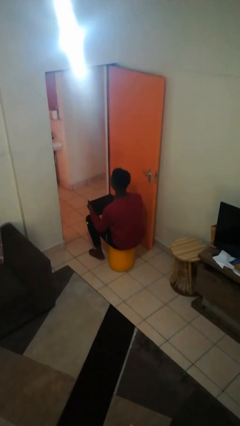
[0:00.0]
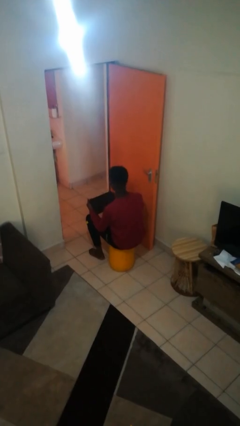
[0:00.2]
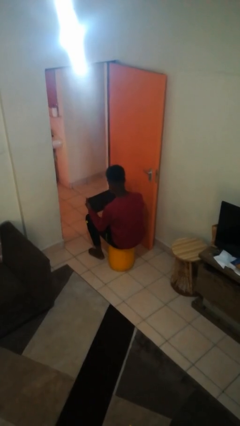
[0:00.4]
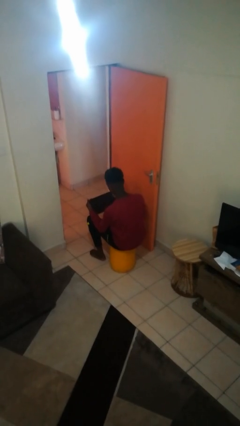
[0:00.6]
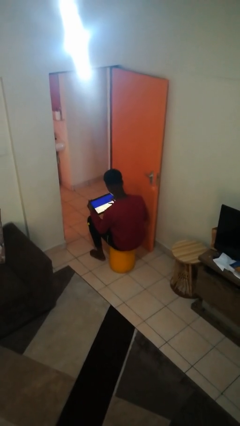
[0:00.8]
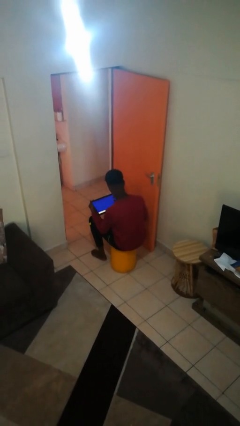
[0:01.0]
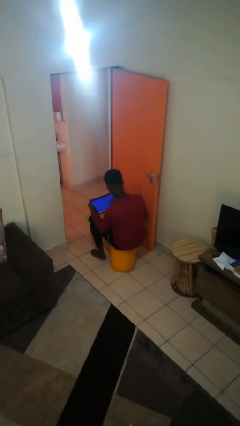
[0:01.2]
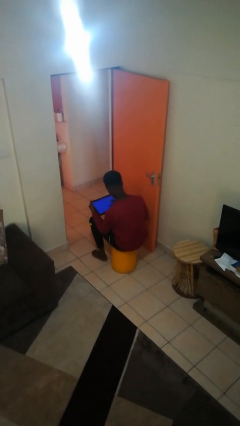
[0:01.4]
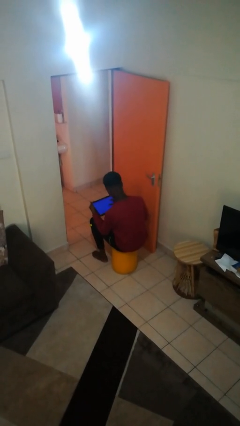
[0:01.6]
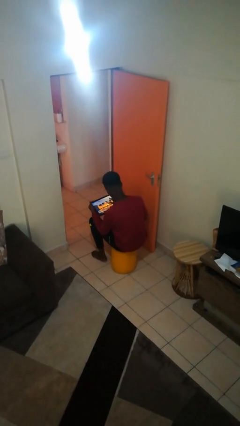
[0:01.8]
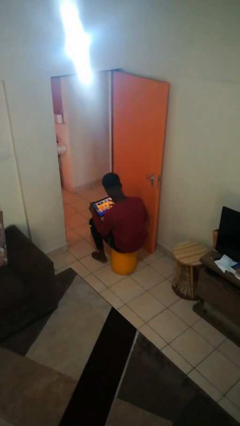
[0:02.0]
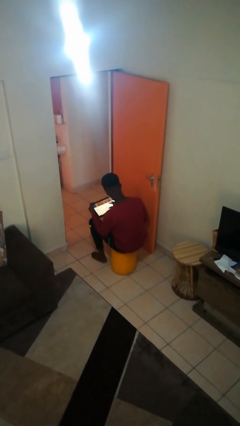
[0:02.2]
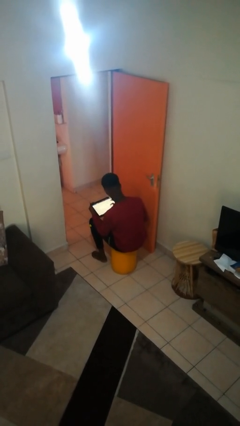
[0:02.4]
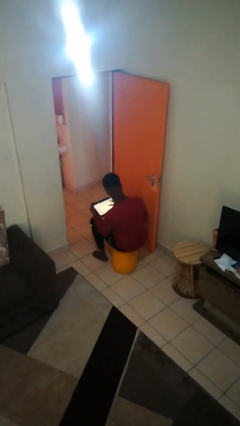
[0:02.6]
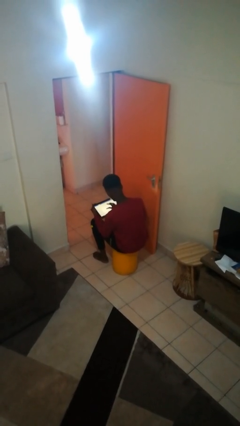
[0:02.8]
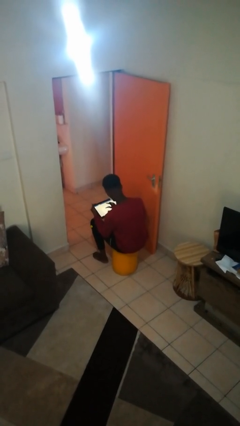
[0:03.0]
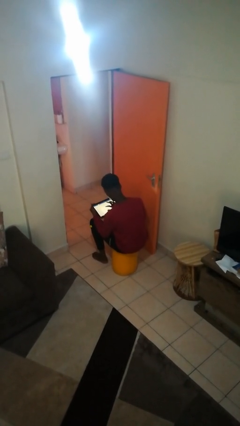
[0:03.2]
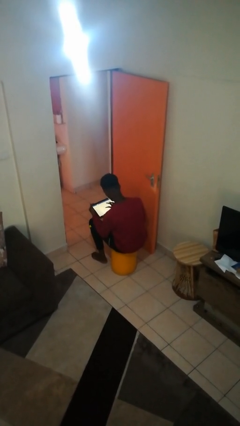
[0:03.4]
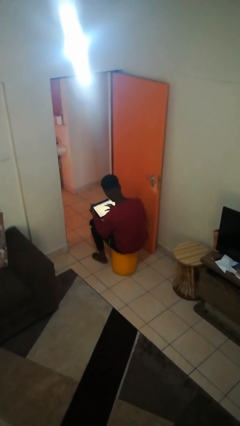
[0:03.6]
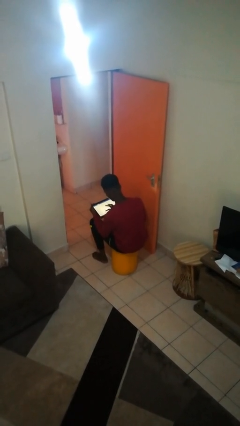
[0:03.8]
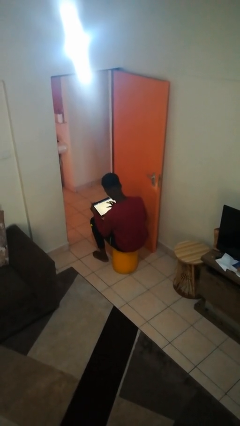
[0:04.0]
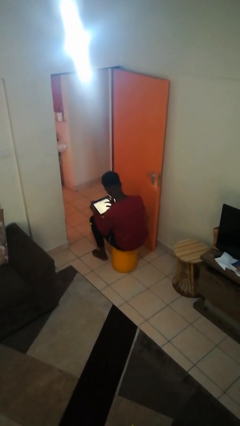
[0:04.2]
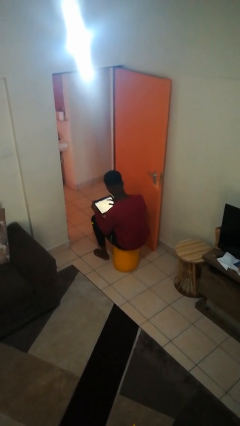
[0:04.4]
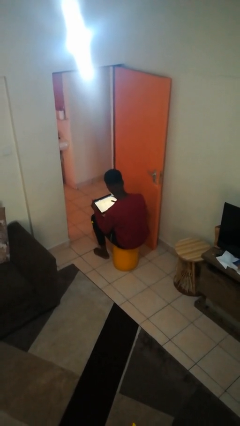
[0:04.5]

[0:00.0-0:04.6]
person interacts with tablet

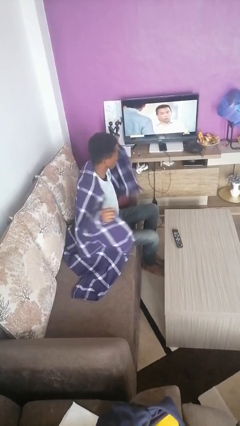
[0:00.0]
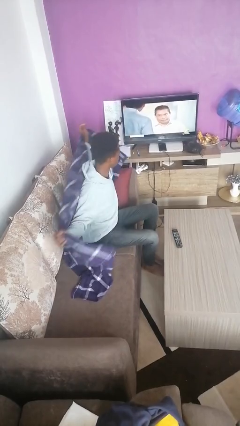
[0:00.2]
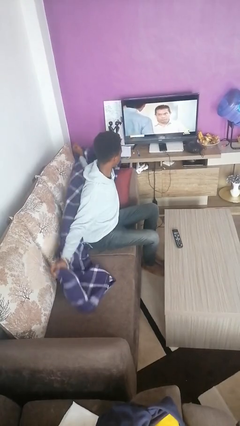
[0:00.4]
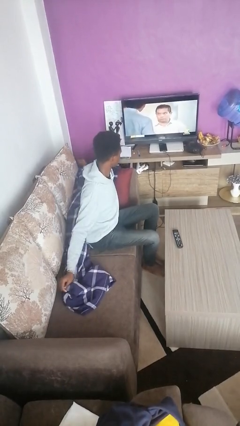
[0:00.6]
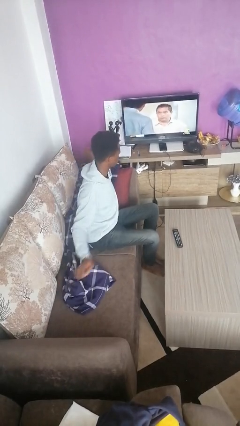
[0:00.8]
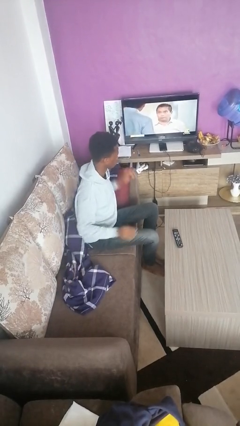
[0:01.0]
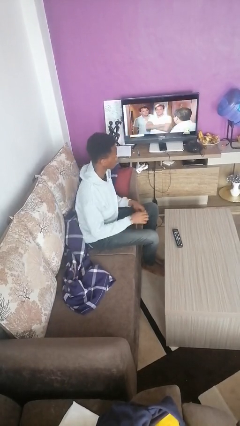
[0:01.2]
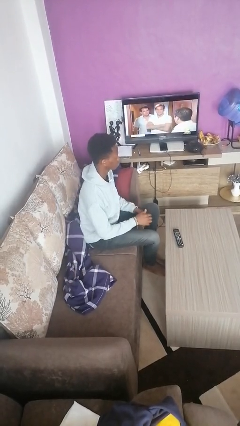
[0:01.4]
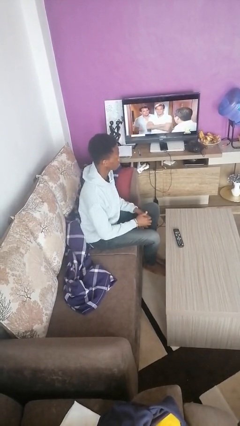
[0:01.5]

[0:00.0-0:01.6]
person uncovers with blanket

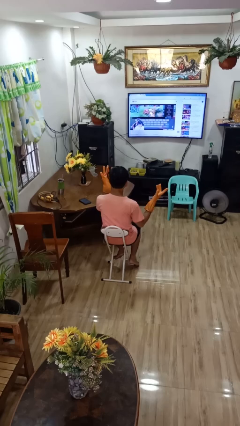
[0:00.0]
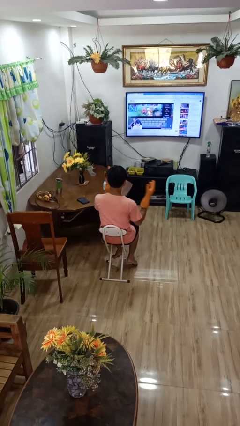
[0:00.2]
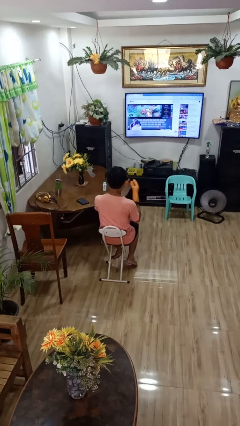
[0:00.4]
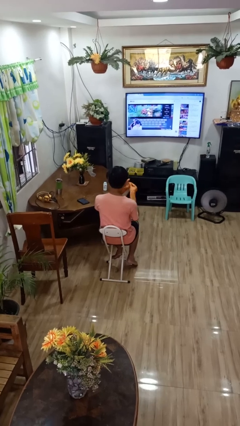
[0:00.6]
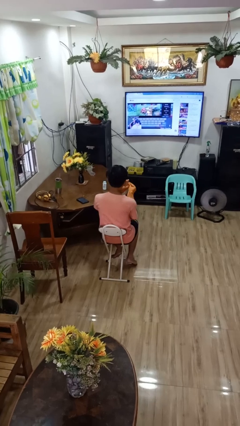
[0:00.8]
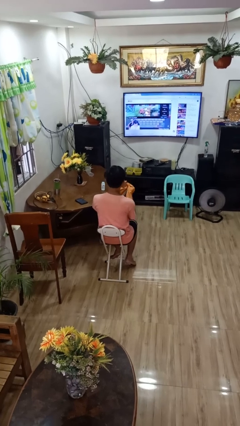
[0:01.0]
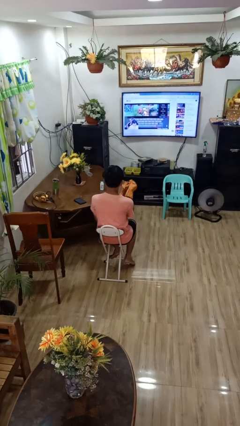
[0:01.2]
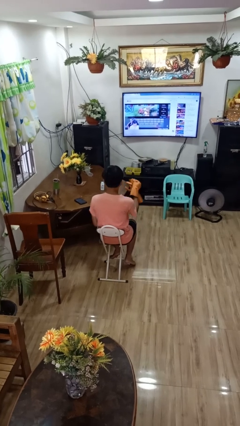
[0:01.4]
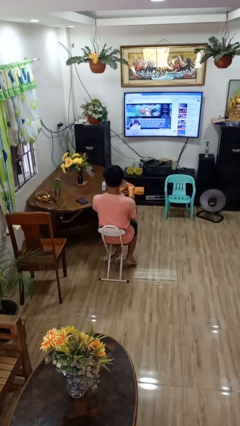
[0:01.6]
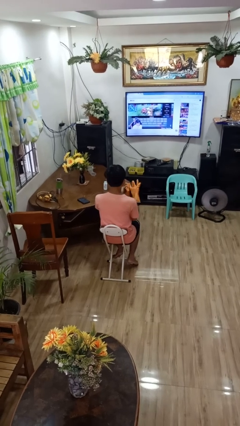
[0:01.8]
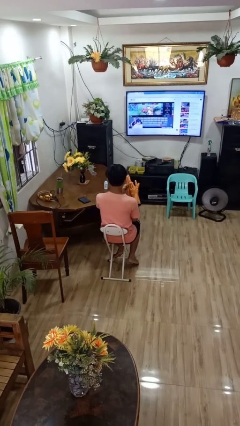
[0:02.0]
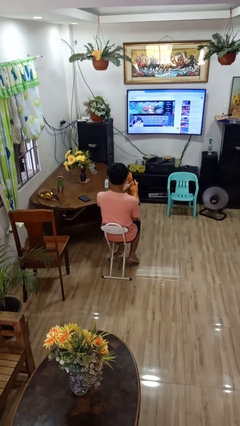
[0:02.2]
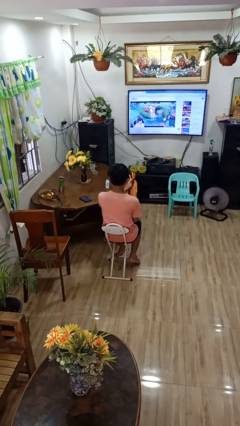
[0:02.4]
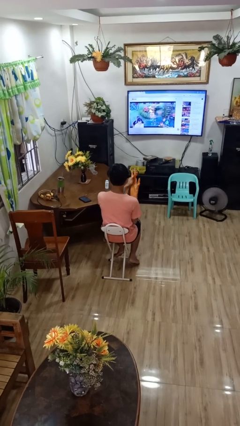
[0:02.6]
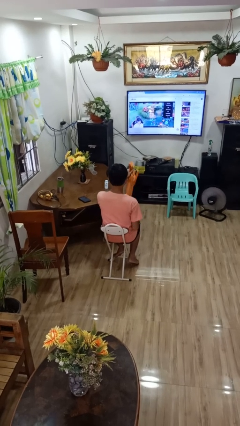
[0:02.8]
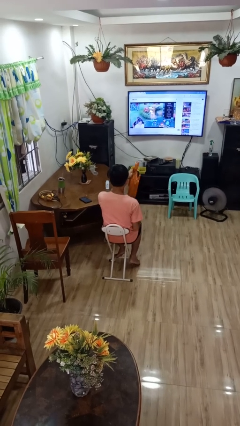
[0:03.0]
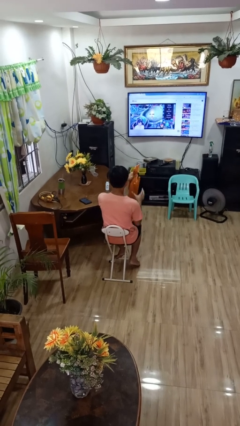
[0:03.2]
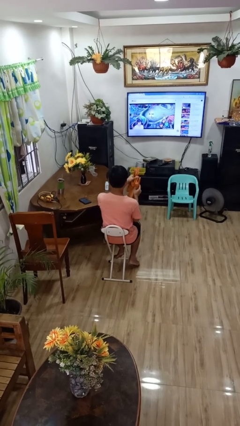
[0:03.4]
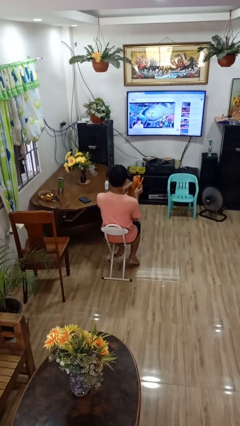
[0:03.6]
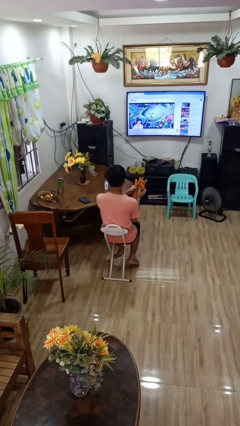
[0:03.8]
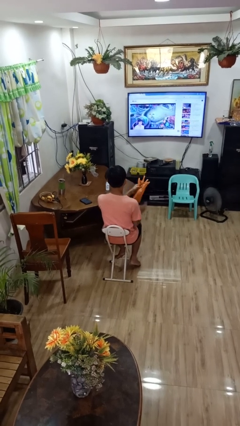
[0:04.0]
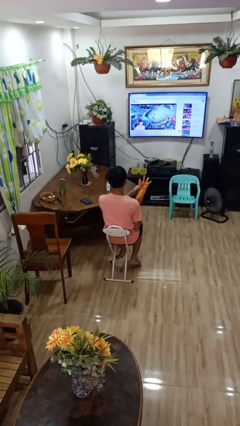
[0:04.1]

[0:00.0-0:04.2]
person takes off gloves

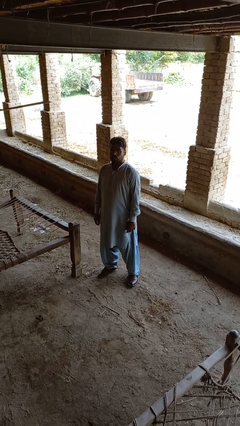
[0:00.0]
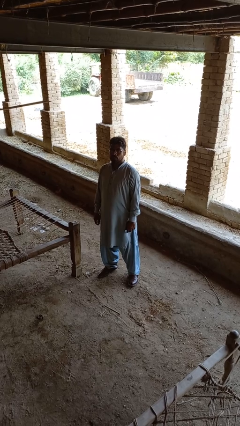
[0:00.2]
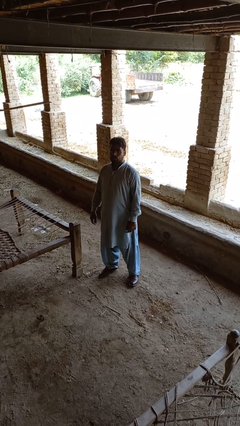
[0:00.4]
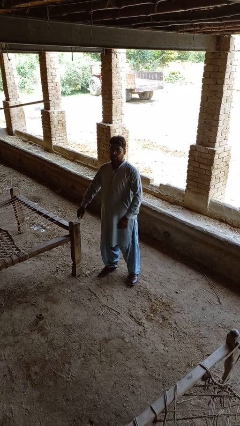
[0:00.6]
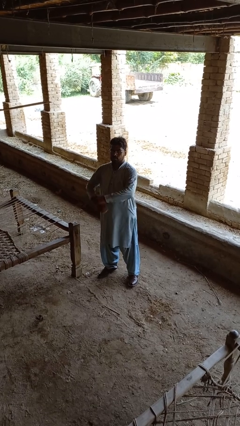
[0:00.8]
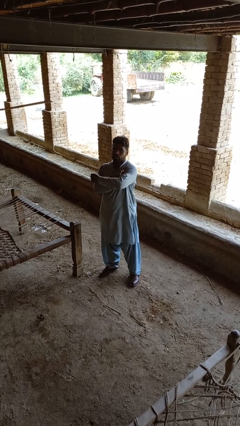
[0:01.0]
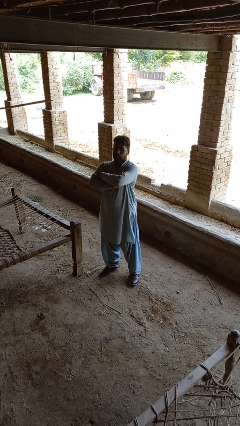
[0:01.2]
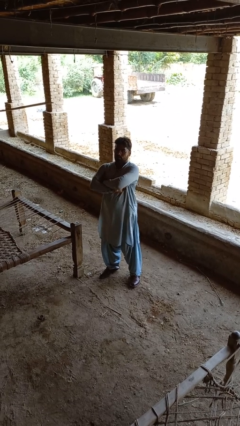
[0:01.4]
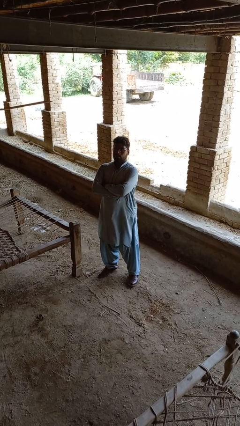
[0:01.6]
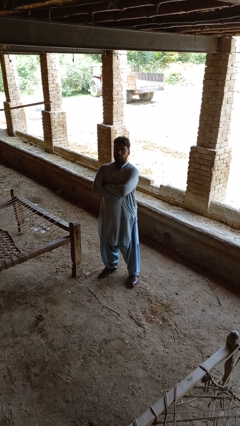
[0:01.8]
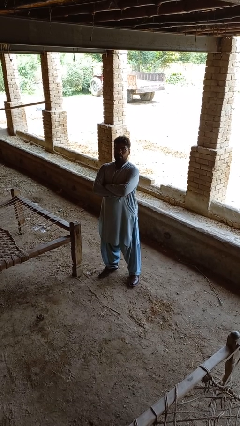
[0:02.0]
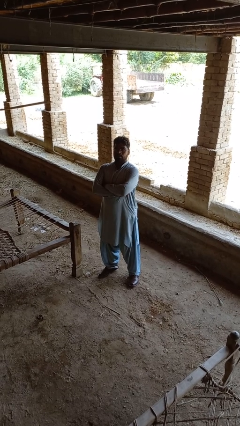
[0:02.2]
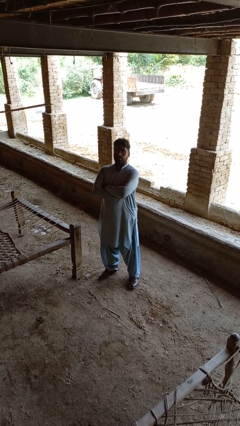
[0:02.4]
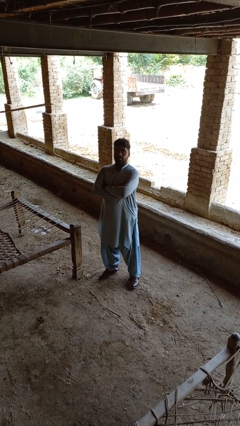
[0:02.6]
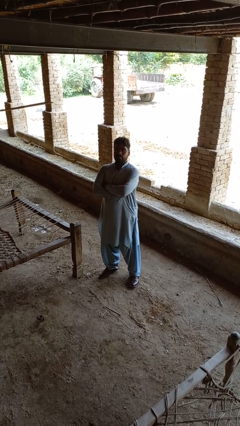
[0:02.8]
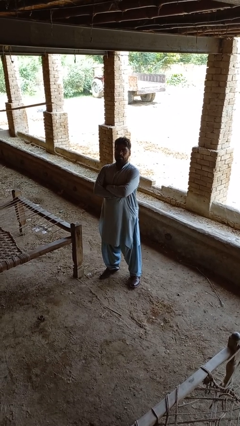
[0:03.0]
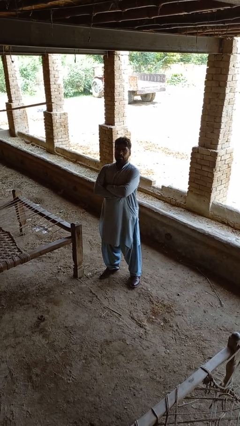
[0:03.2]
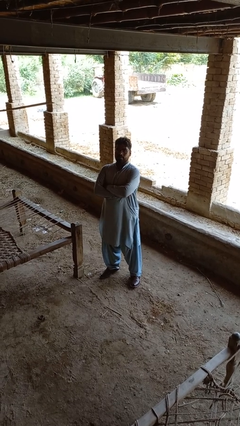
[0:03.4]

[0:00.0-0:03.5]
person crosses arms

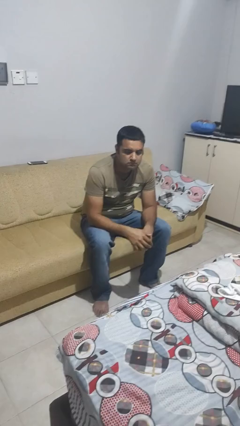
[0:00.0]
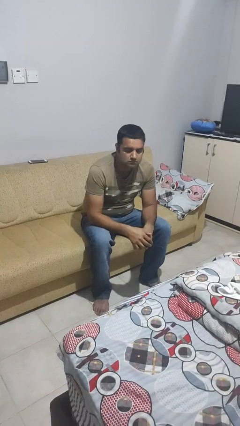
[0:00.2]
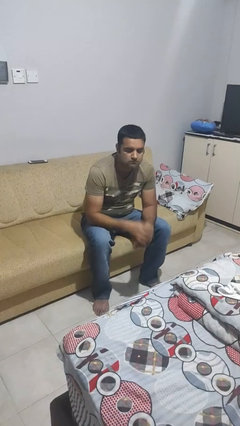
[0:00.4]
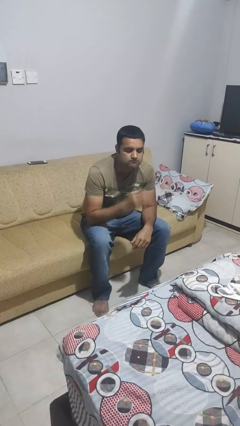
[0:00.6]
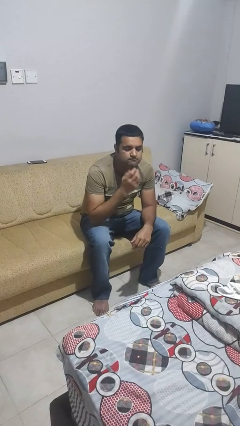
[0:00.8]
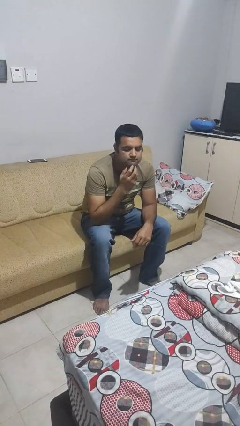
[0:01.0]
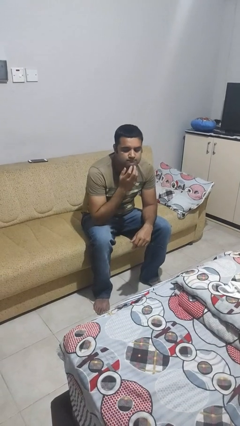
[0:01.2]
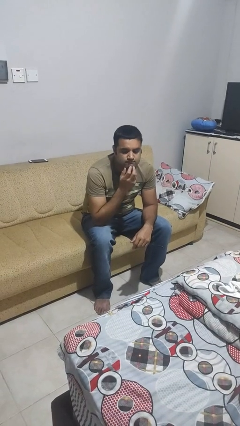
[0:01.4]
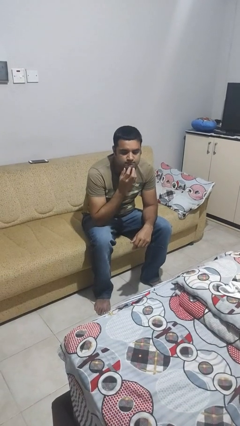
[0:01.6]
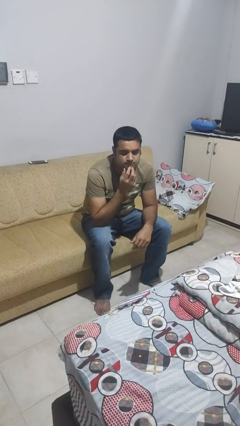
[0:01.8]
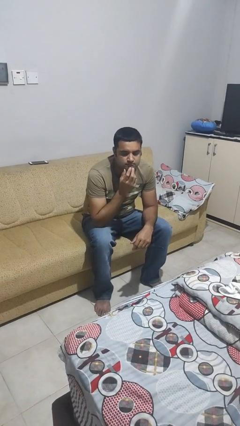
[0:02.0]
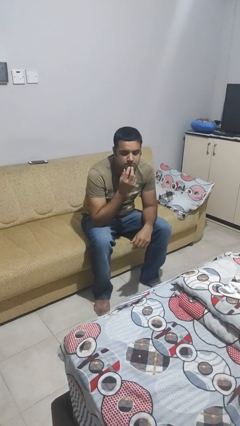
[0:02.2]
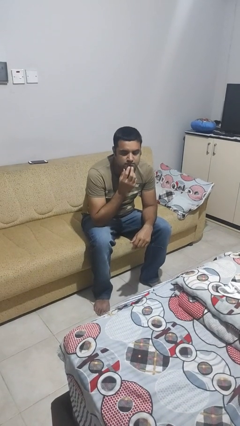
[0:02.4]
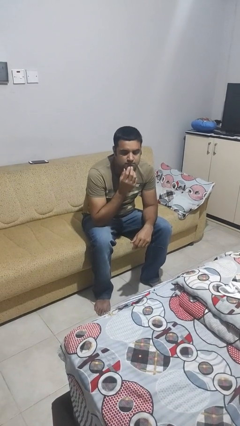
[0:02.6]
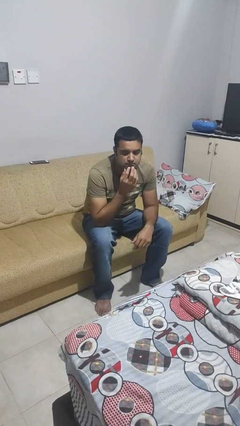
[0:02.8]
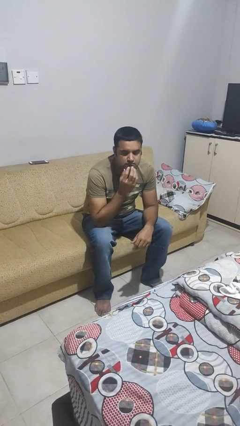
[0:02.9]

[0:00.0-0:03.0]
person strokes chin

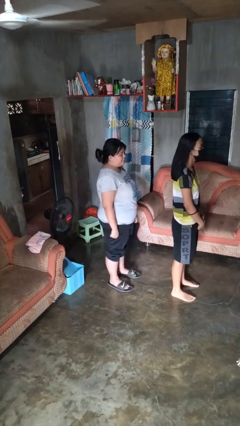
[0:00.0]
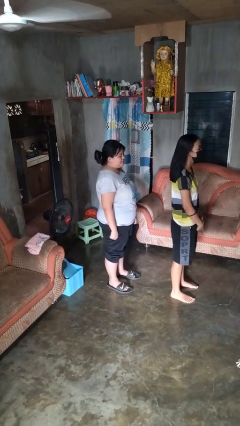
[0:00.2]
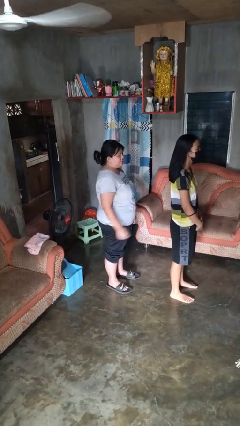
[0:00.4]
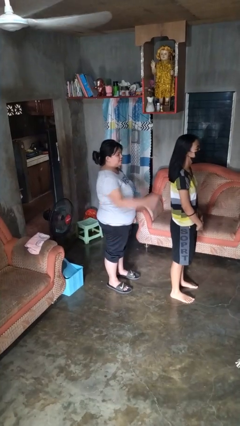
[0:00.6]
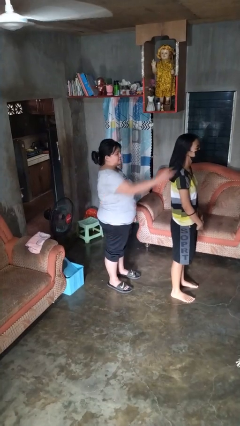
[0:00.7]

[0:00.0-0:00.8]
person grabs person by hair
